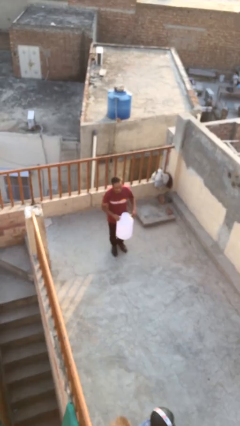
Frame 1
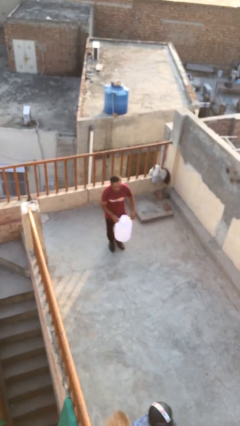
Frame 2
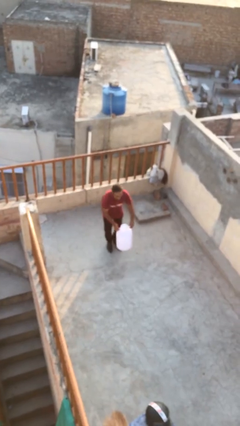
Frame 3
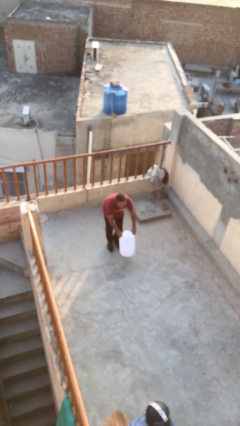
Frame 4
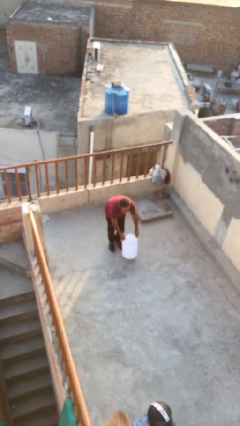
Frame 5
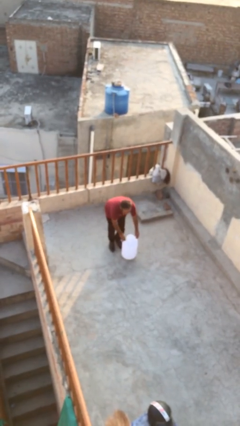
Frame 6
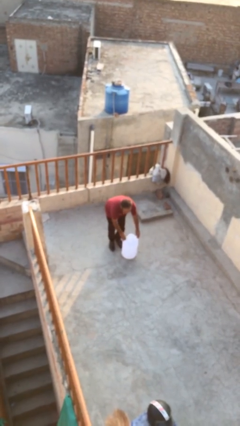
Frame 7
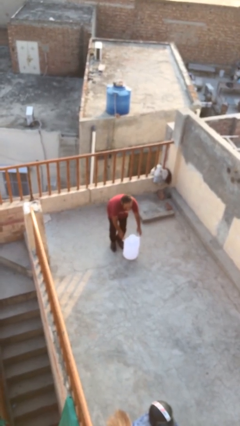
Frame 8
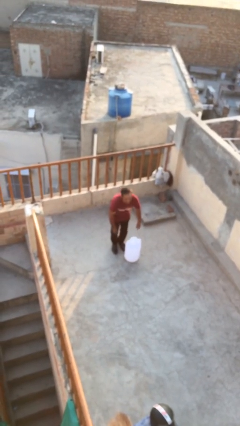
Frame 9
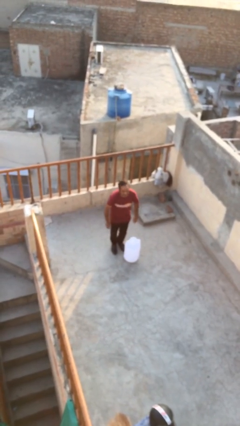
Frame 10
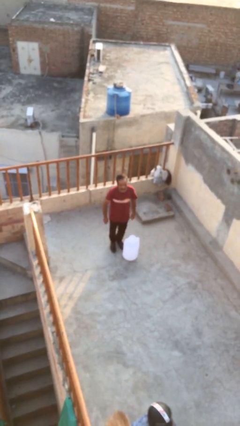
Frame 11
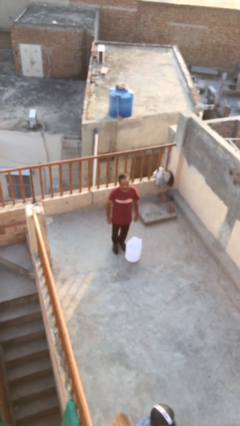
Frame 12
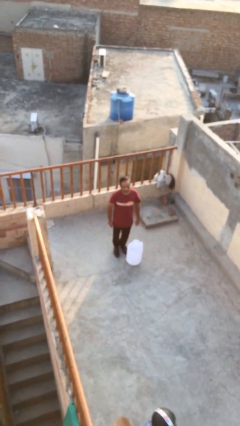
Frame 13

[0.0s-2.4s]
person puts down object on floor

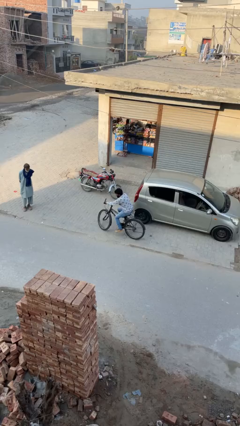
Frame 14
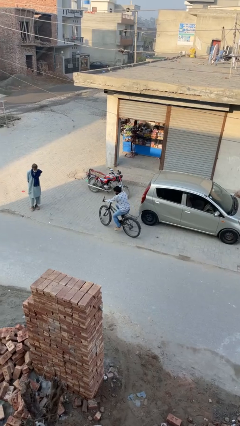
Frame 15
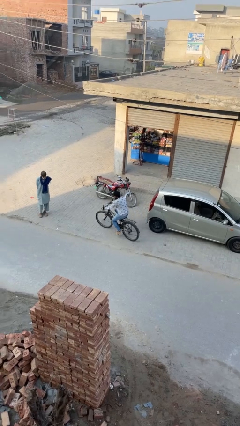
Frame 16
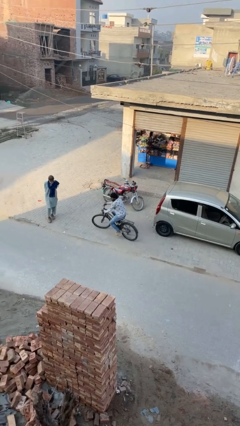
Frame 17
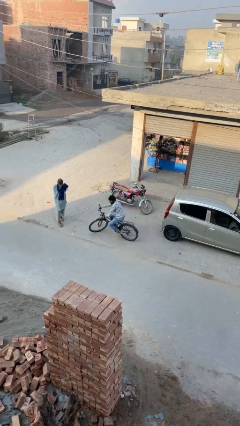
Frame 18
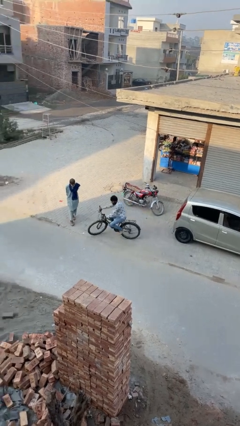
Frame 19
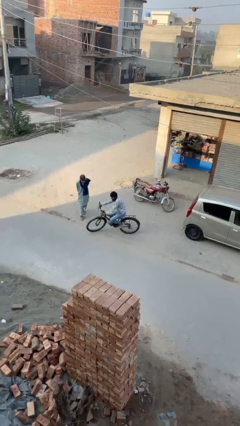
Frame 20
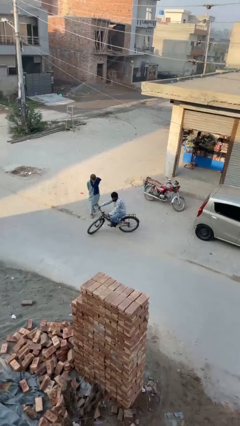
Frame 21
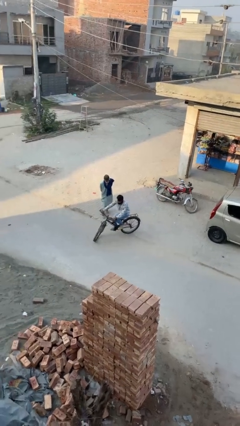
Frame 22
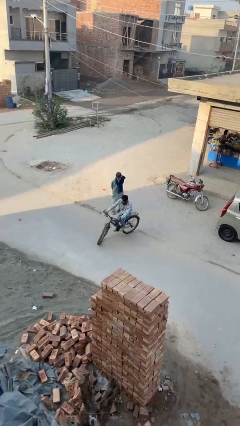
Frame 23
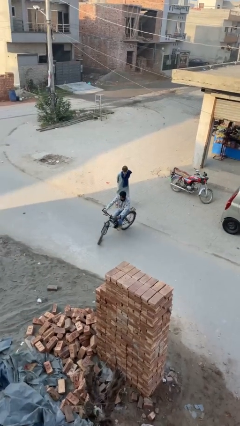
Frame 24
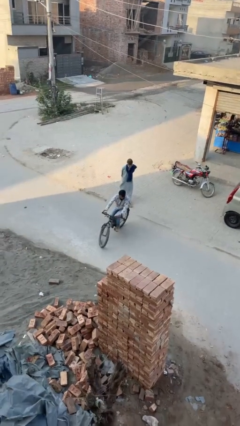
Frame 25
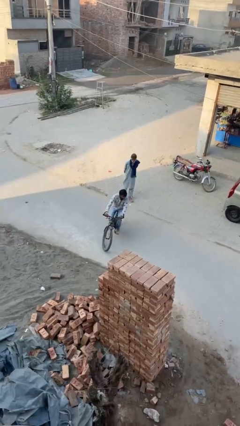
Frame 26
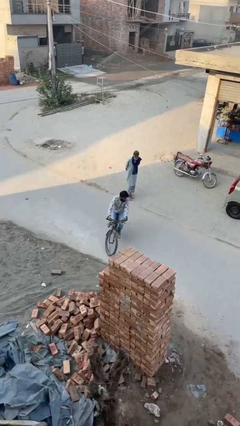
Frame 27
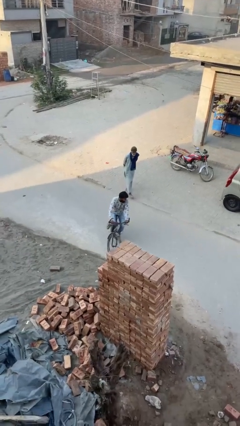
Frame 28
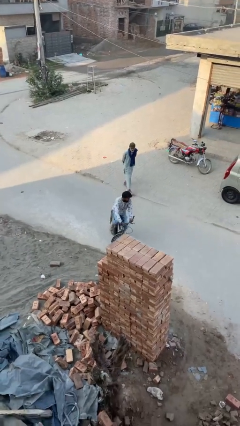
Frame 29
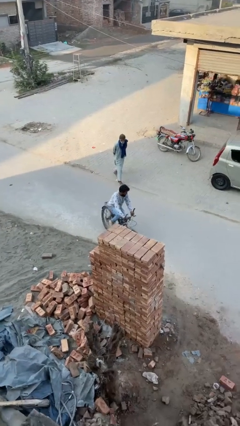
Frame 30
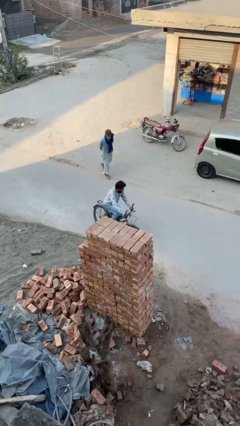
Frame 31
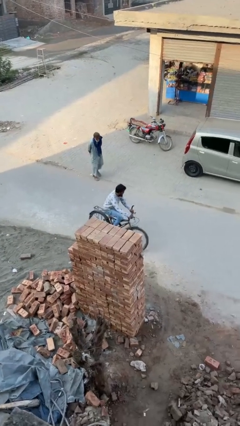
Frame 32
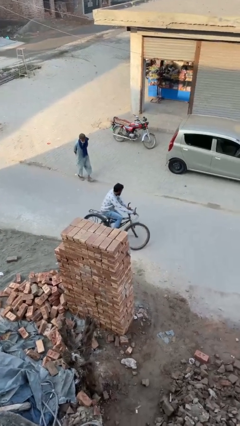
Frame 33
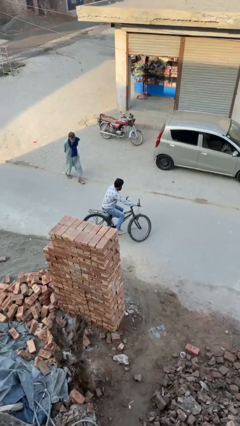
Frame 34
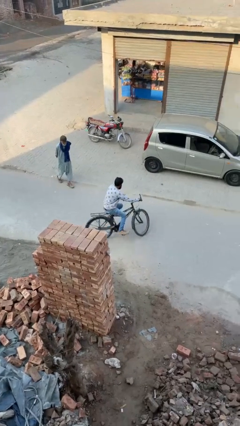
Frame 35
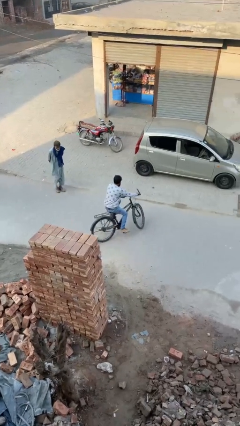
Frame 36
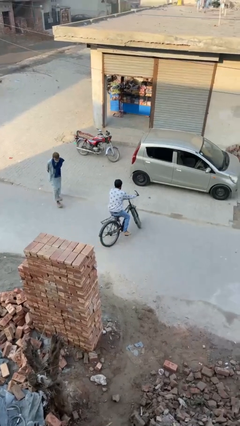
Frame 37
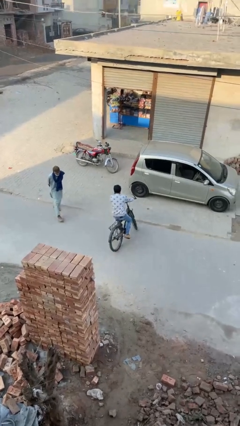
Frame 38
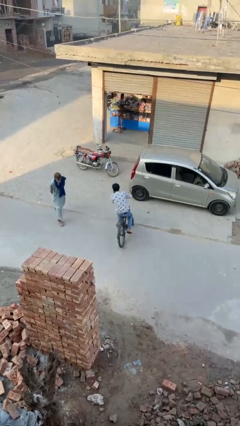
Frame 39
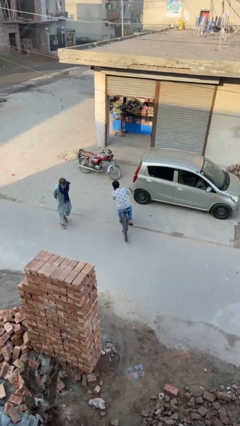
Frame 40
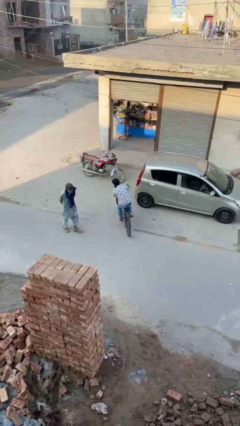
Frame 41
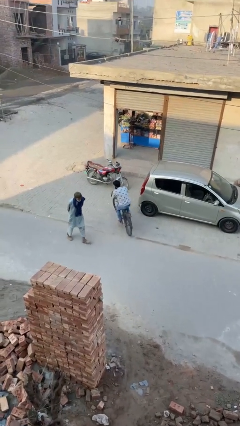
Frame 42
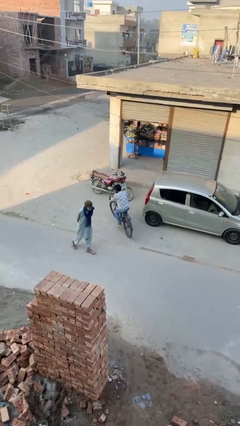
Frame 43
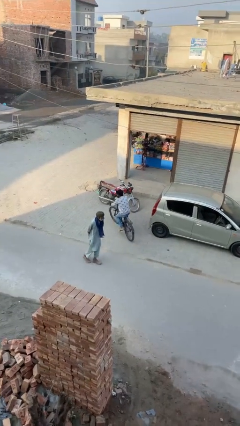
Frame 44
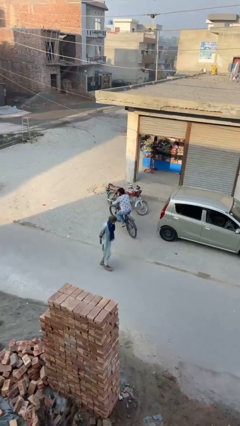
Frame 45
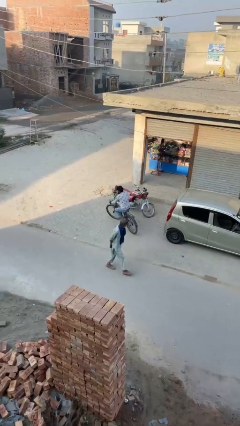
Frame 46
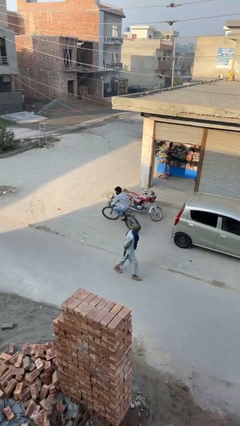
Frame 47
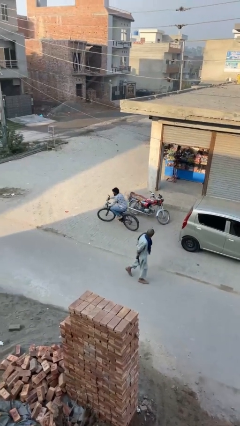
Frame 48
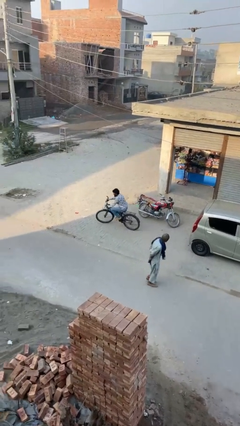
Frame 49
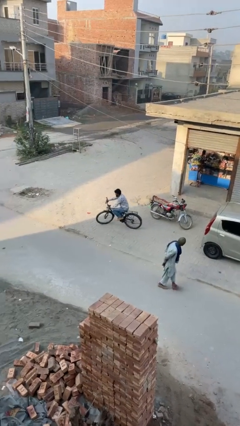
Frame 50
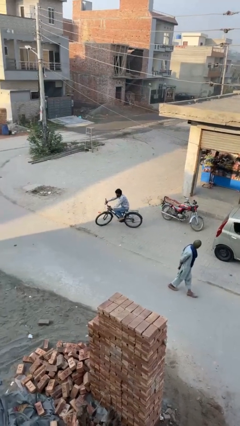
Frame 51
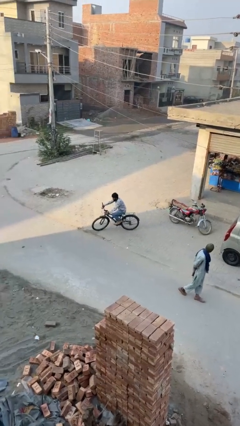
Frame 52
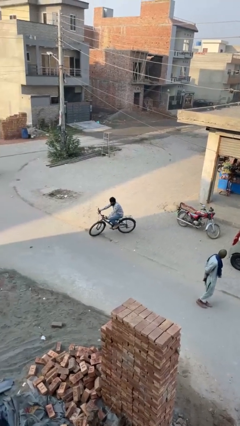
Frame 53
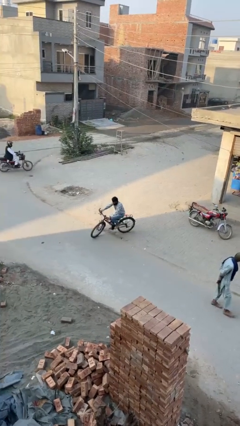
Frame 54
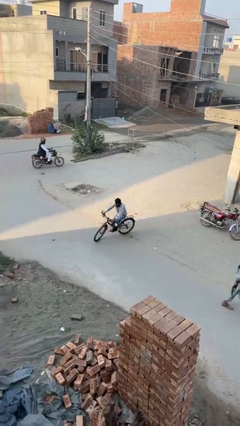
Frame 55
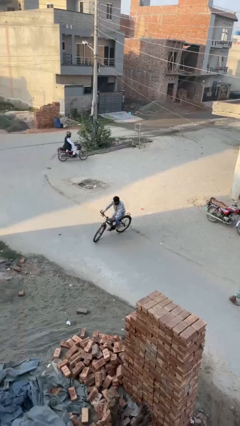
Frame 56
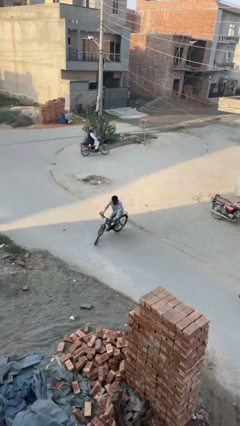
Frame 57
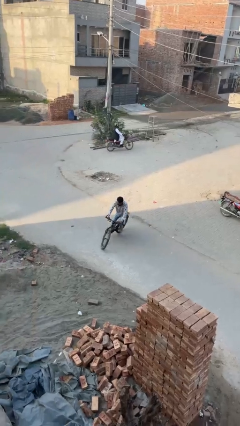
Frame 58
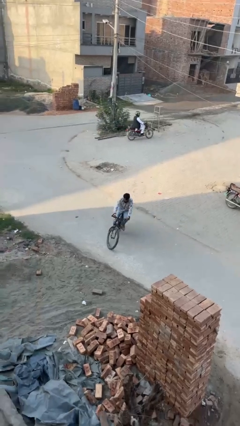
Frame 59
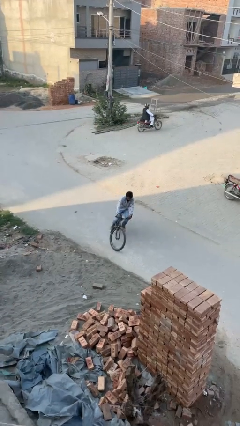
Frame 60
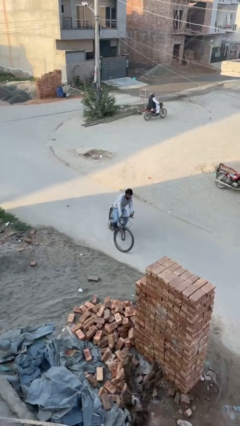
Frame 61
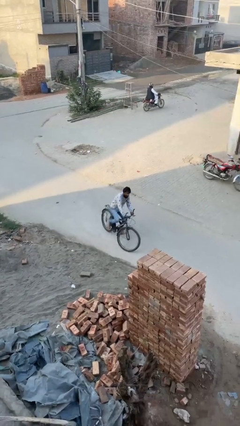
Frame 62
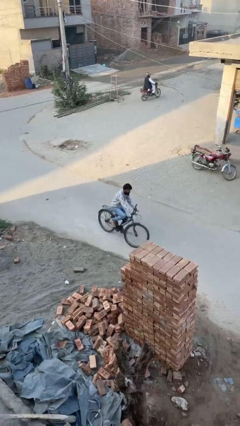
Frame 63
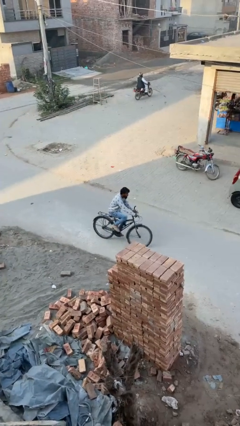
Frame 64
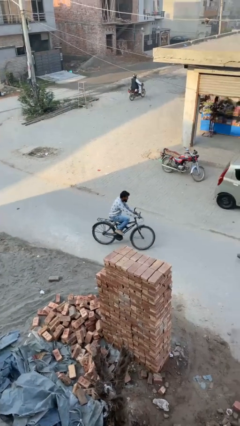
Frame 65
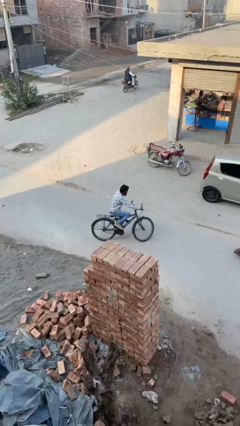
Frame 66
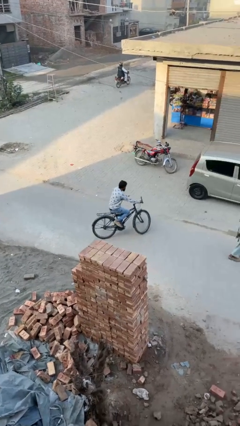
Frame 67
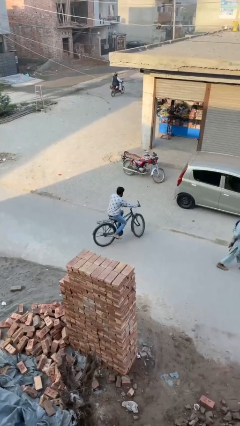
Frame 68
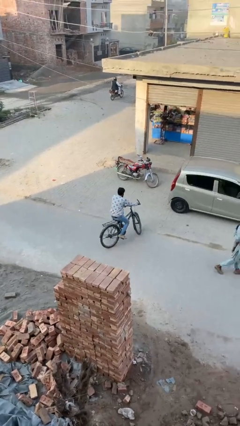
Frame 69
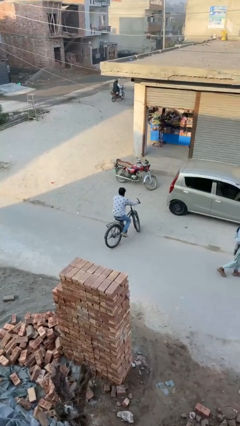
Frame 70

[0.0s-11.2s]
person rides bicycle

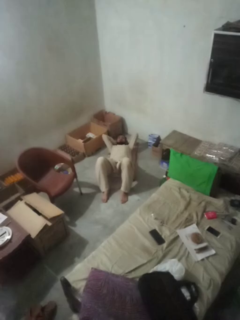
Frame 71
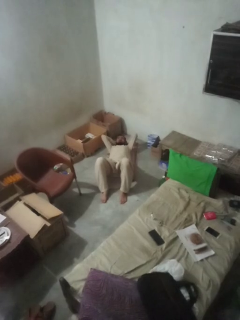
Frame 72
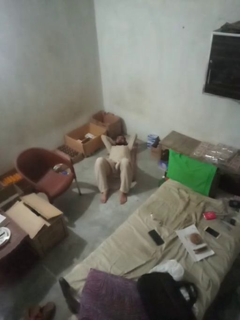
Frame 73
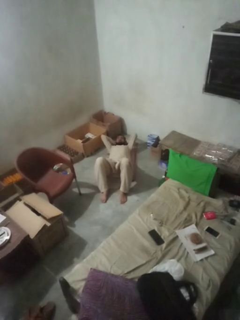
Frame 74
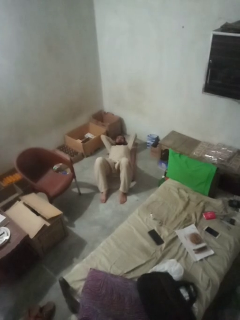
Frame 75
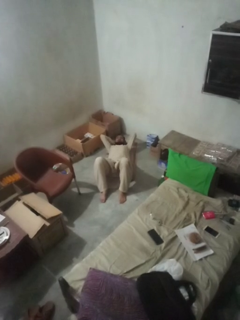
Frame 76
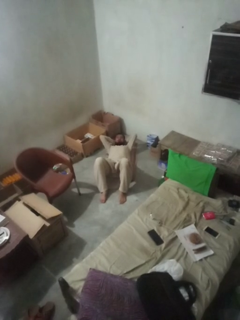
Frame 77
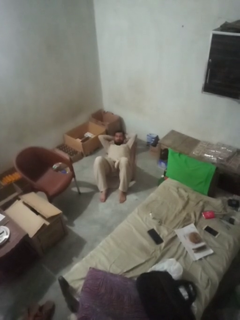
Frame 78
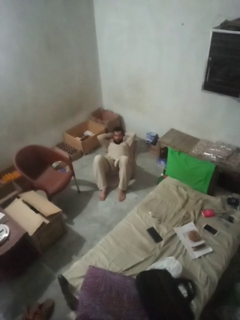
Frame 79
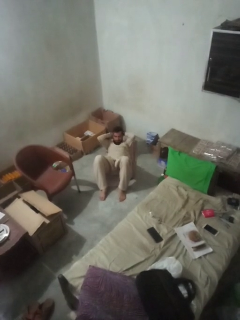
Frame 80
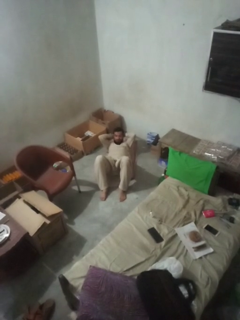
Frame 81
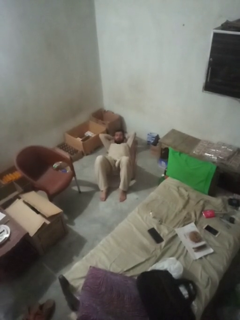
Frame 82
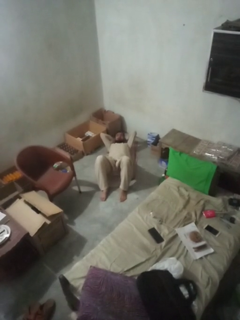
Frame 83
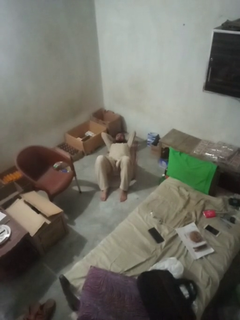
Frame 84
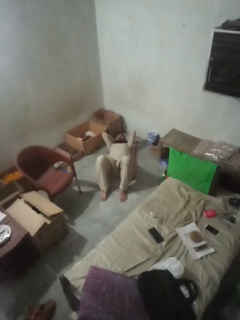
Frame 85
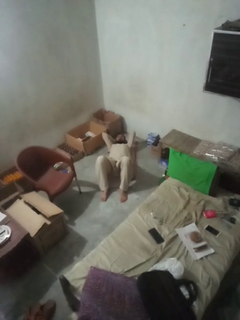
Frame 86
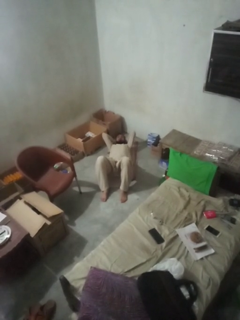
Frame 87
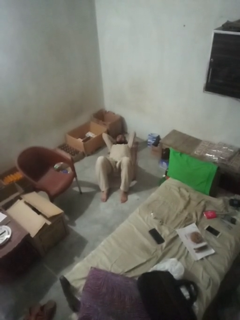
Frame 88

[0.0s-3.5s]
person exercises with situp

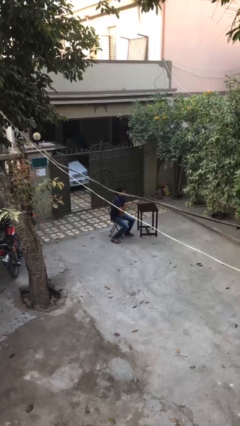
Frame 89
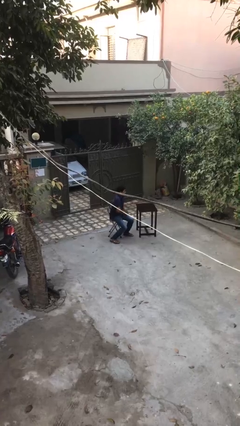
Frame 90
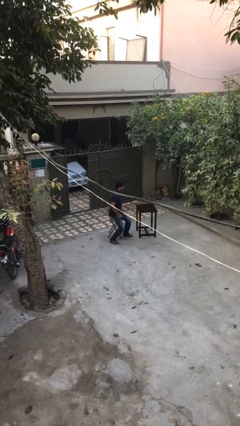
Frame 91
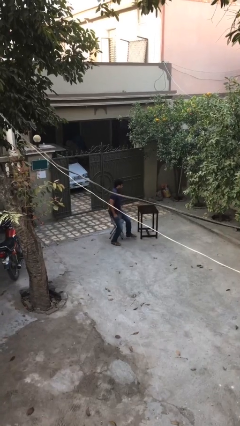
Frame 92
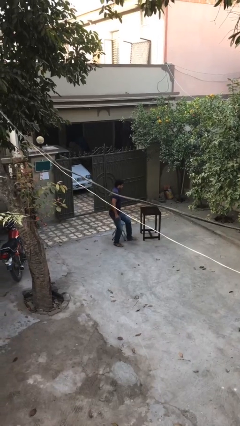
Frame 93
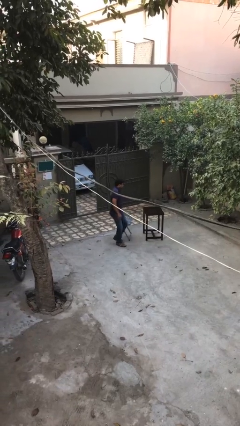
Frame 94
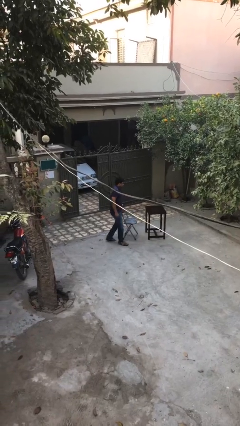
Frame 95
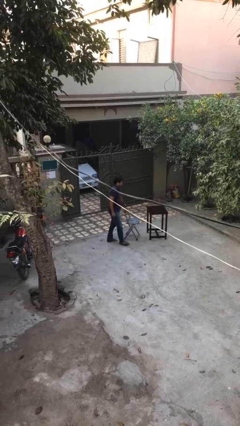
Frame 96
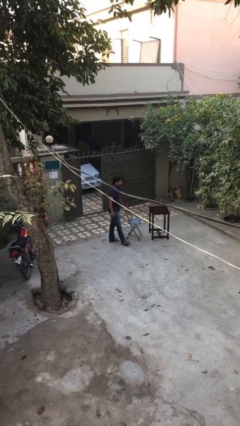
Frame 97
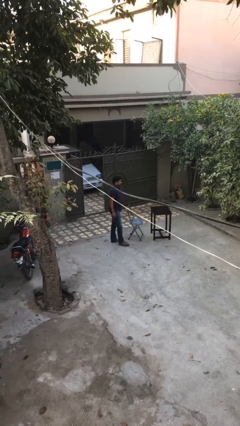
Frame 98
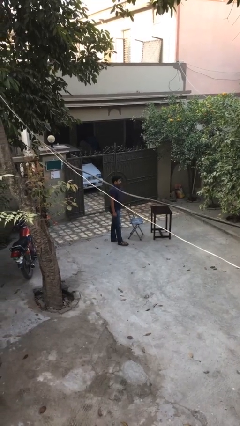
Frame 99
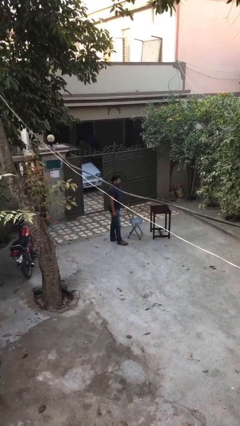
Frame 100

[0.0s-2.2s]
person stands up
